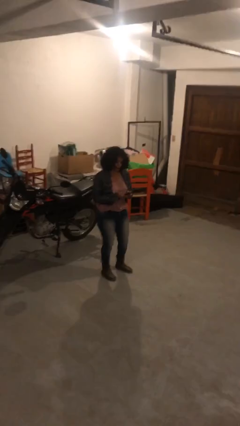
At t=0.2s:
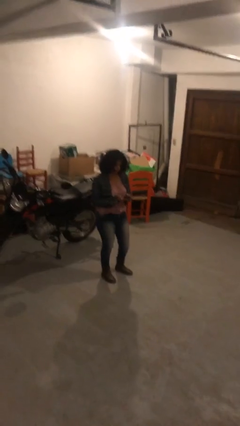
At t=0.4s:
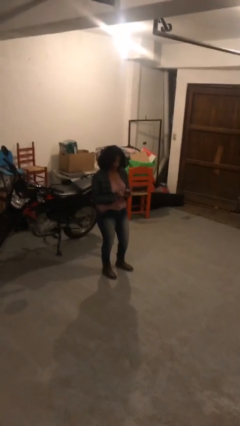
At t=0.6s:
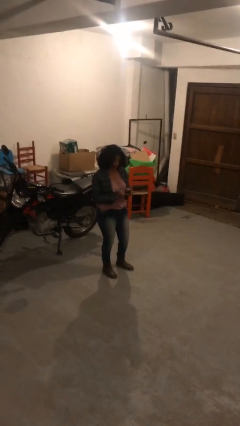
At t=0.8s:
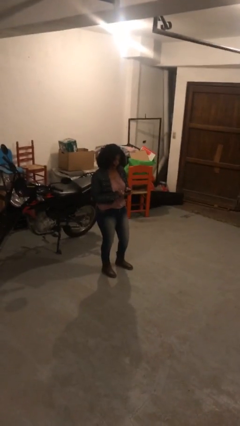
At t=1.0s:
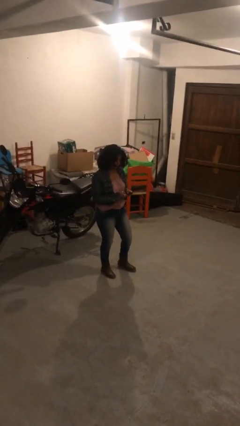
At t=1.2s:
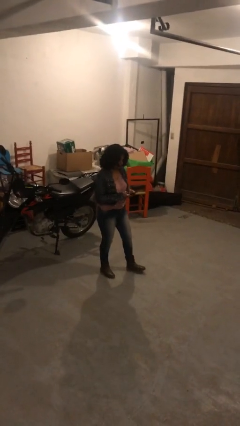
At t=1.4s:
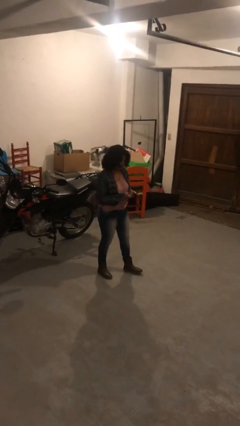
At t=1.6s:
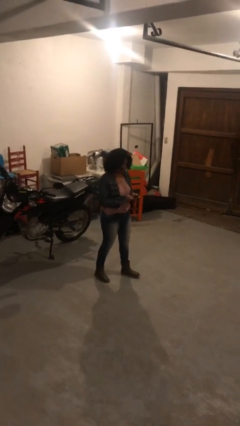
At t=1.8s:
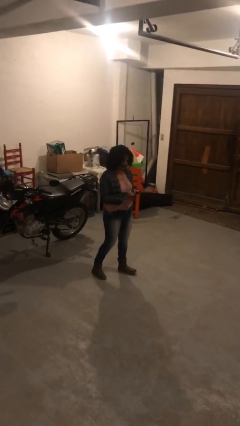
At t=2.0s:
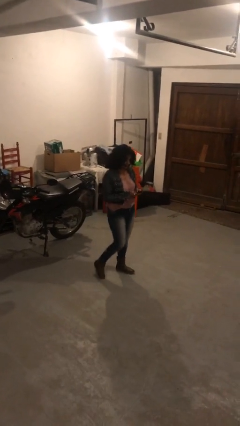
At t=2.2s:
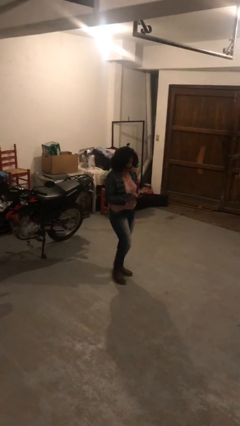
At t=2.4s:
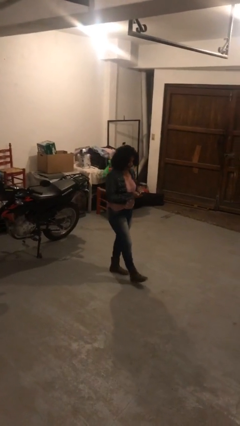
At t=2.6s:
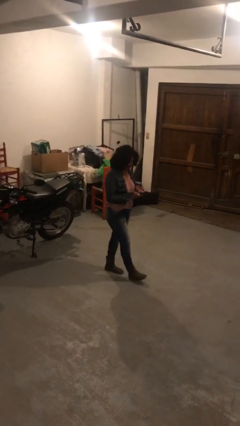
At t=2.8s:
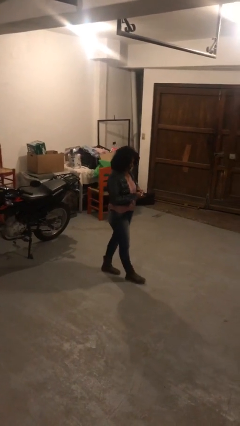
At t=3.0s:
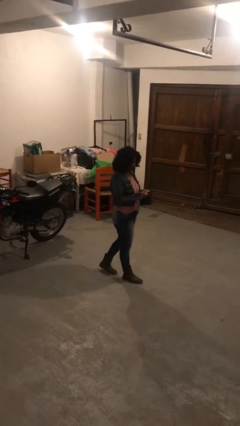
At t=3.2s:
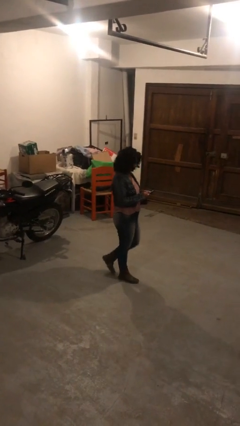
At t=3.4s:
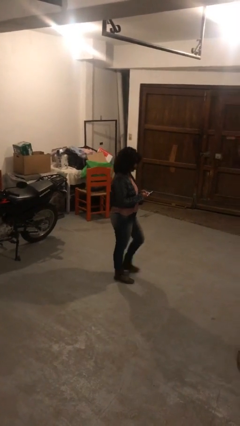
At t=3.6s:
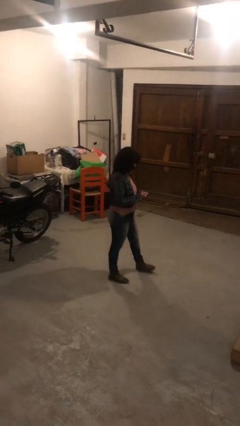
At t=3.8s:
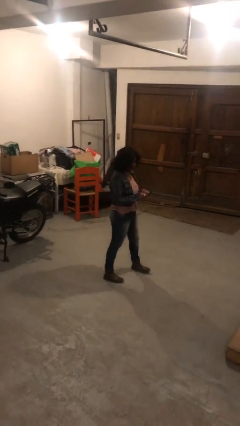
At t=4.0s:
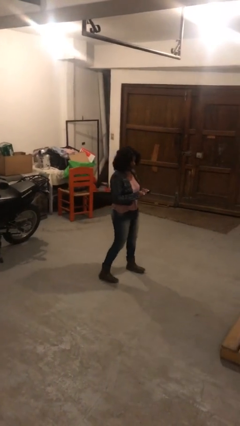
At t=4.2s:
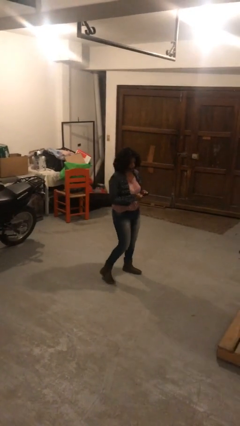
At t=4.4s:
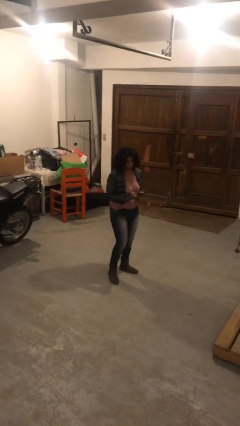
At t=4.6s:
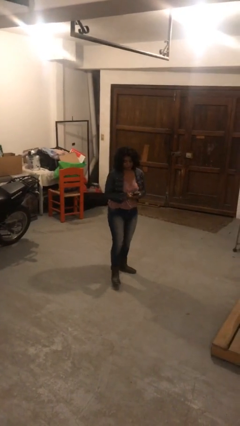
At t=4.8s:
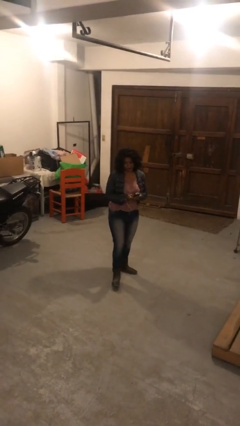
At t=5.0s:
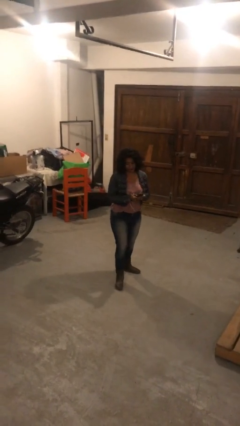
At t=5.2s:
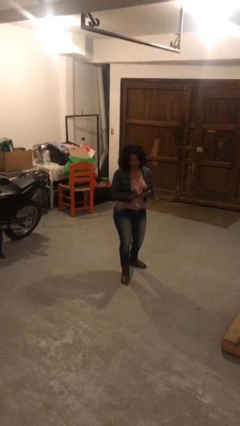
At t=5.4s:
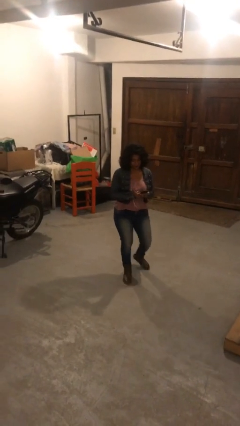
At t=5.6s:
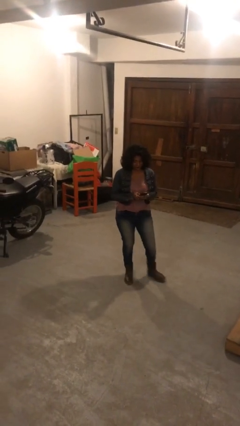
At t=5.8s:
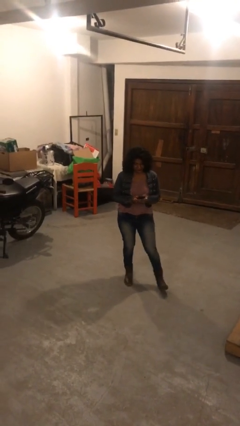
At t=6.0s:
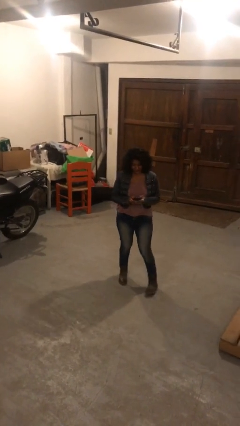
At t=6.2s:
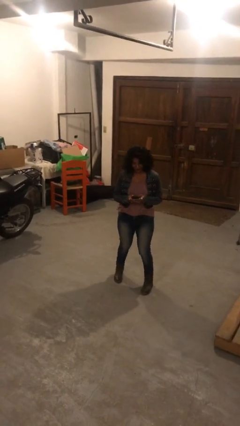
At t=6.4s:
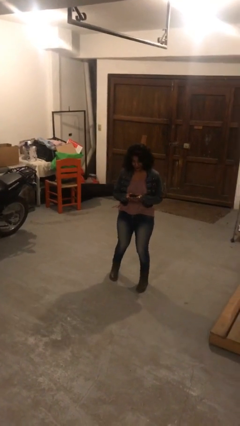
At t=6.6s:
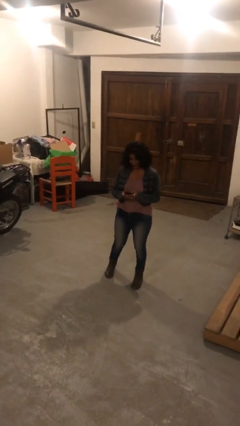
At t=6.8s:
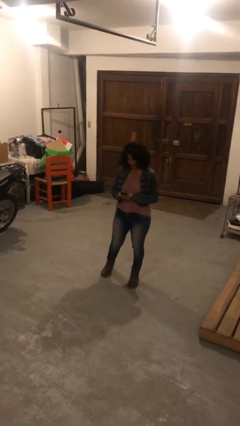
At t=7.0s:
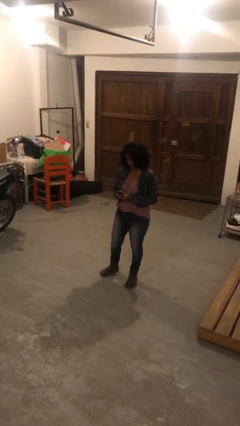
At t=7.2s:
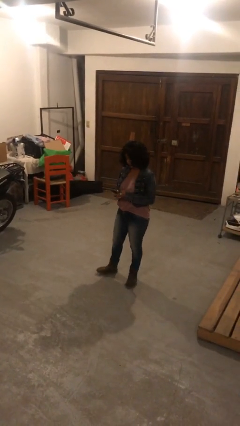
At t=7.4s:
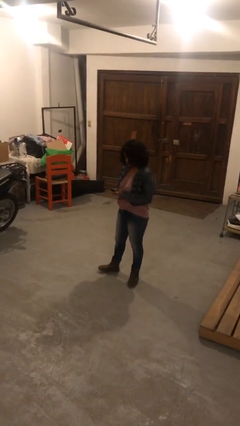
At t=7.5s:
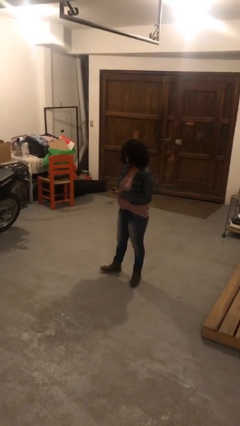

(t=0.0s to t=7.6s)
person texts on phone

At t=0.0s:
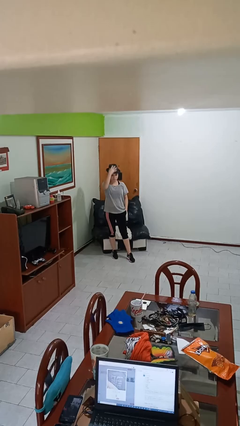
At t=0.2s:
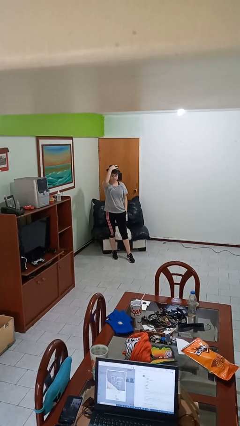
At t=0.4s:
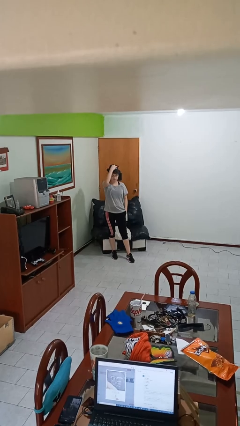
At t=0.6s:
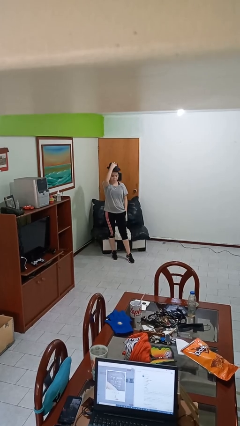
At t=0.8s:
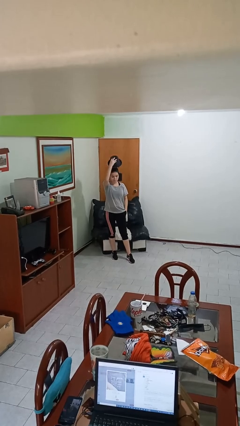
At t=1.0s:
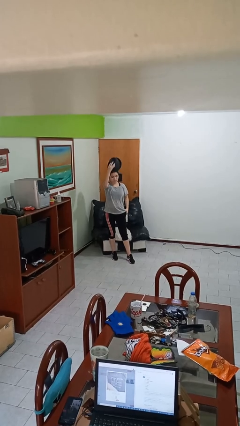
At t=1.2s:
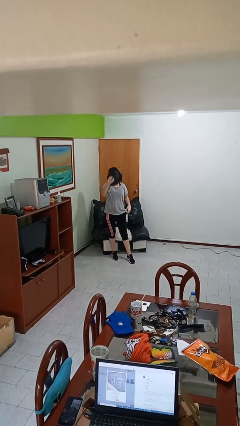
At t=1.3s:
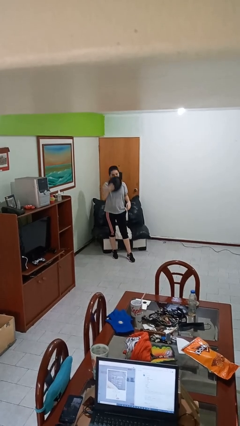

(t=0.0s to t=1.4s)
person takes off hat

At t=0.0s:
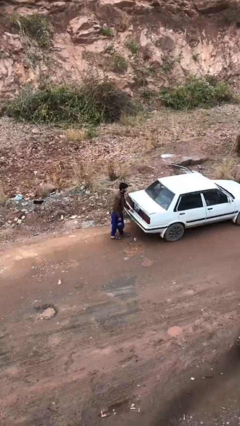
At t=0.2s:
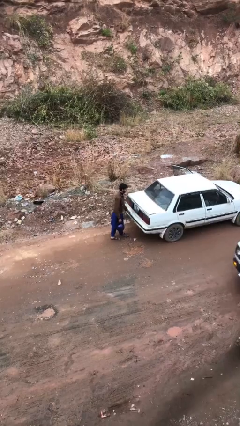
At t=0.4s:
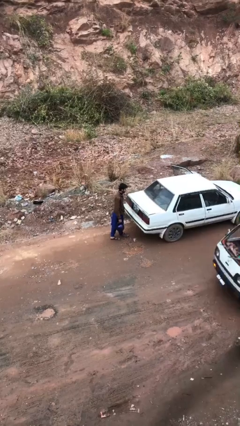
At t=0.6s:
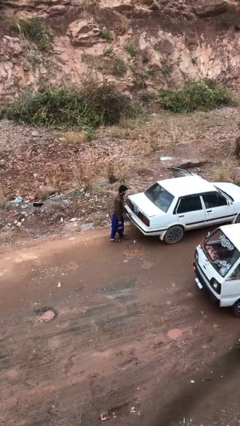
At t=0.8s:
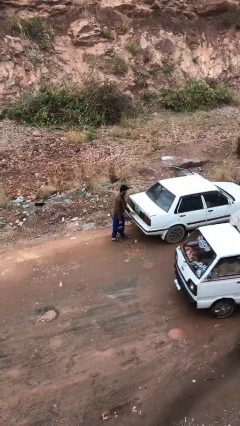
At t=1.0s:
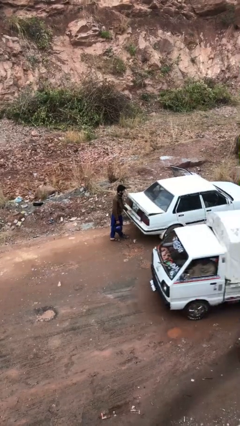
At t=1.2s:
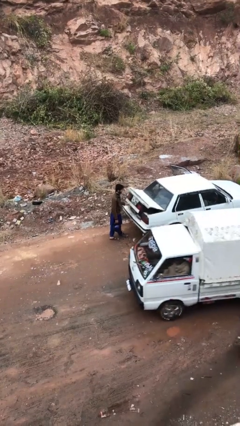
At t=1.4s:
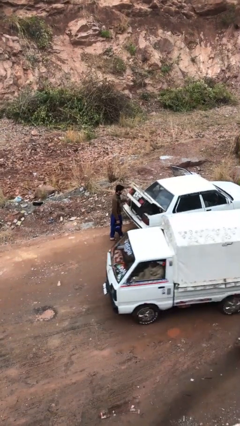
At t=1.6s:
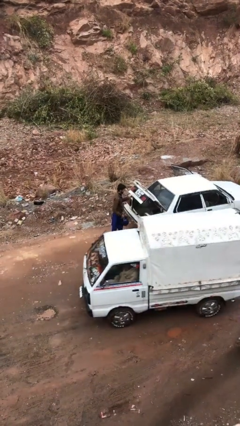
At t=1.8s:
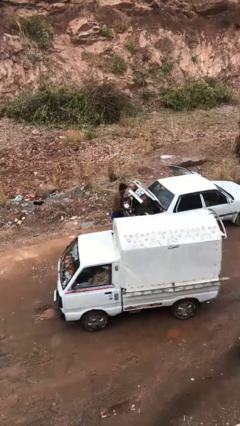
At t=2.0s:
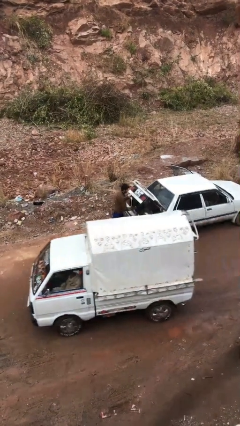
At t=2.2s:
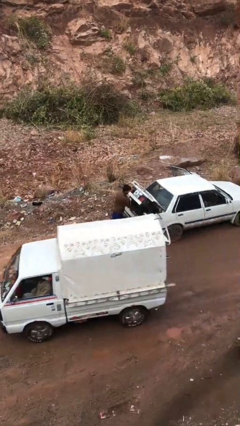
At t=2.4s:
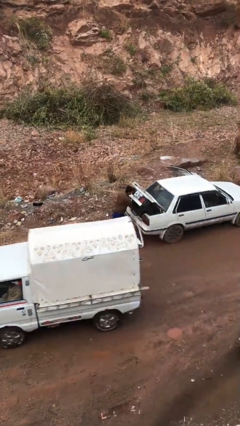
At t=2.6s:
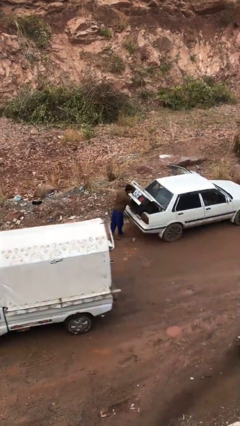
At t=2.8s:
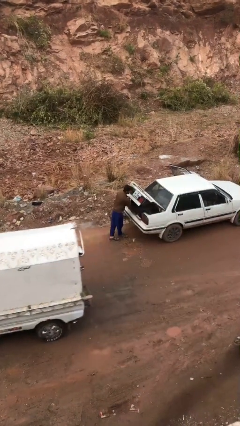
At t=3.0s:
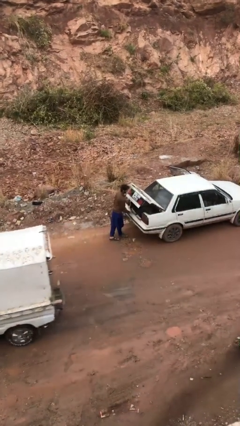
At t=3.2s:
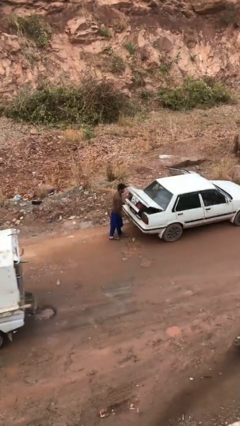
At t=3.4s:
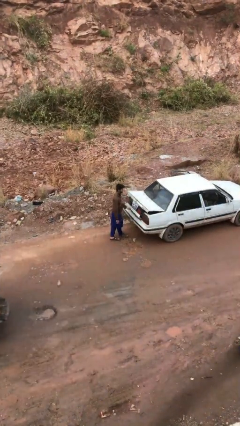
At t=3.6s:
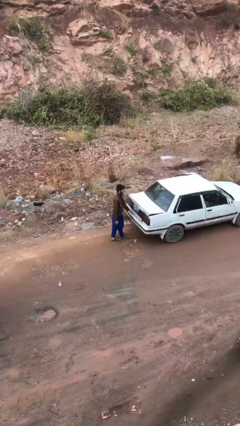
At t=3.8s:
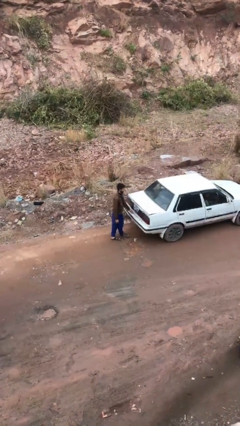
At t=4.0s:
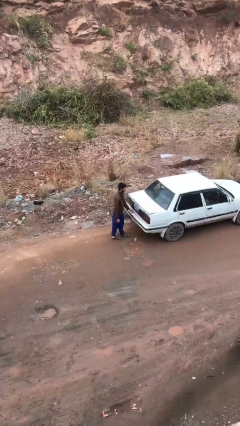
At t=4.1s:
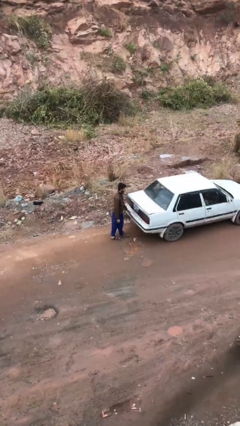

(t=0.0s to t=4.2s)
person loads car

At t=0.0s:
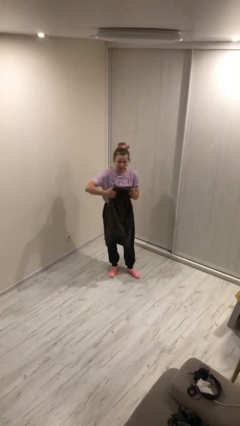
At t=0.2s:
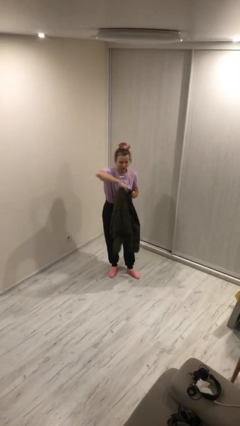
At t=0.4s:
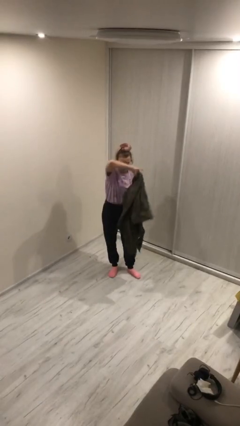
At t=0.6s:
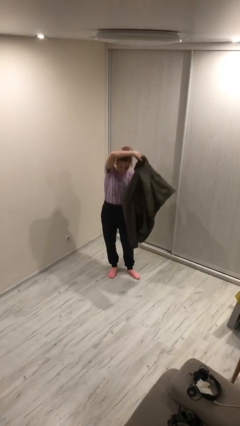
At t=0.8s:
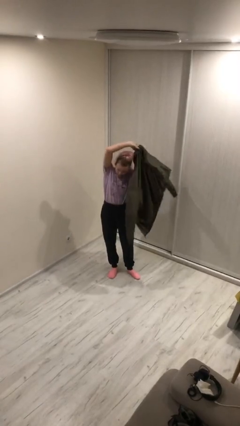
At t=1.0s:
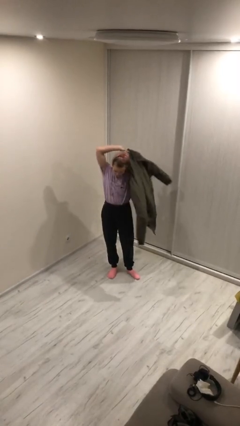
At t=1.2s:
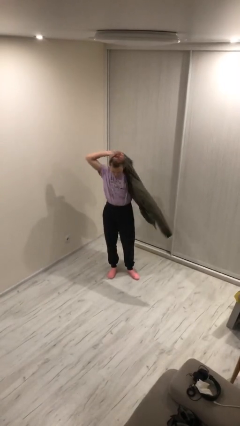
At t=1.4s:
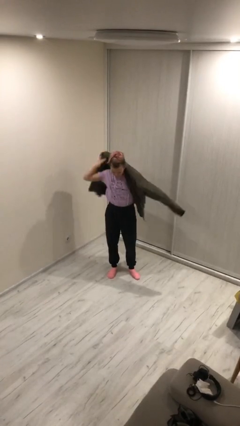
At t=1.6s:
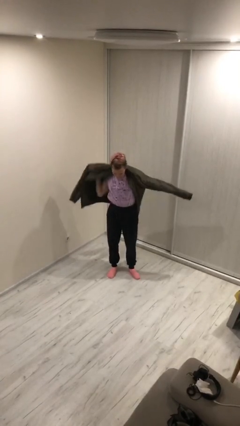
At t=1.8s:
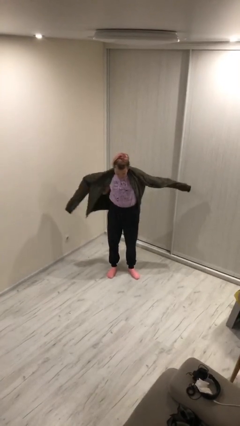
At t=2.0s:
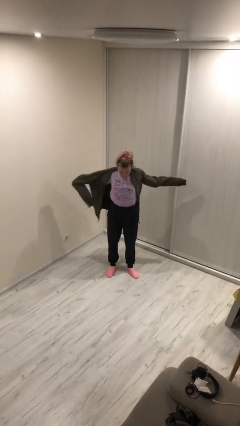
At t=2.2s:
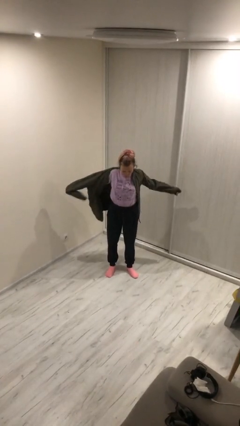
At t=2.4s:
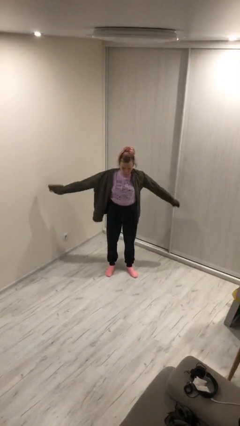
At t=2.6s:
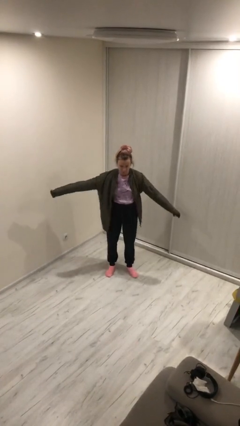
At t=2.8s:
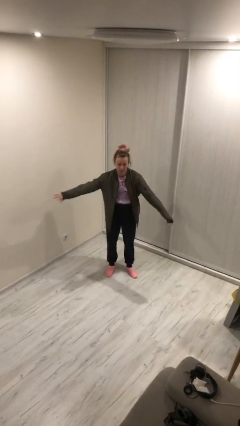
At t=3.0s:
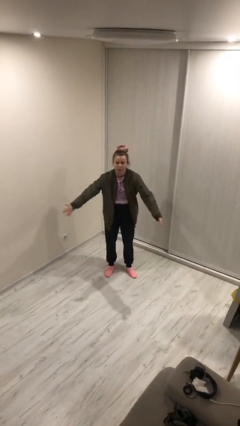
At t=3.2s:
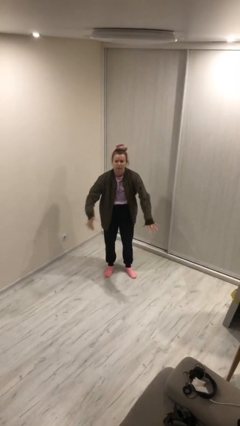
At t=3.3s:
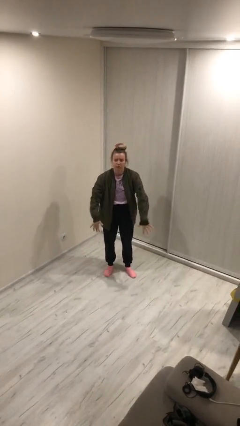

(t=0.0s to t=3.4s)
person puts on jacket

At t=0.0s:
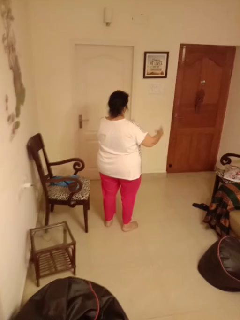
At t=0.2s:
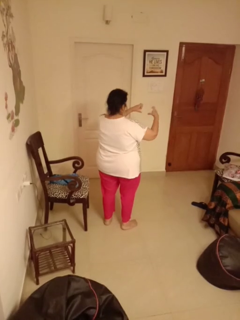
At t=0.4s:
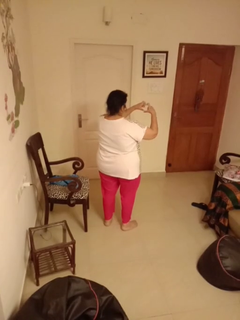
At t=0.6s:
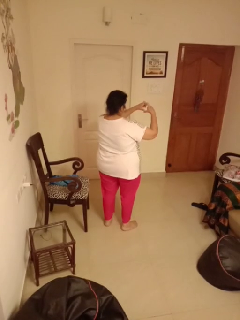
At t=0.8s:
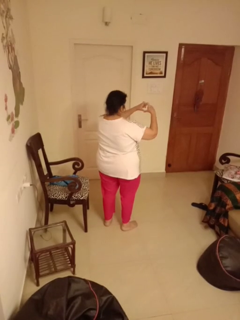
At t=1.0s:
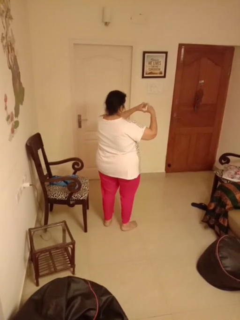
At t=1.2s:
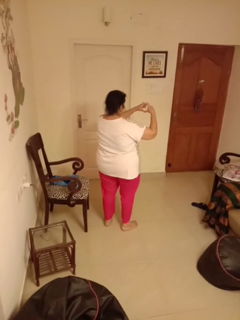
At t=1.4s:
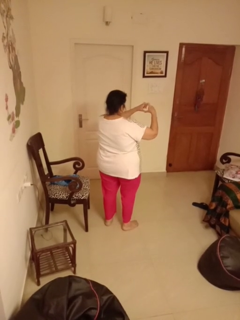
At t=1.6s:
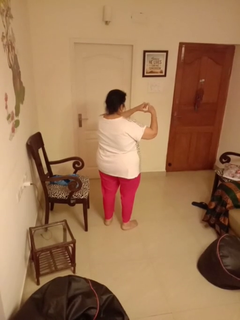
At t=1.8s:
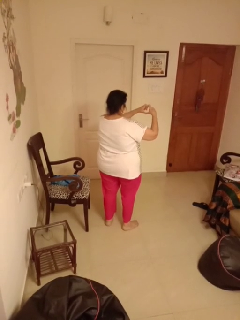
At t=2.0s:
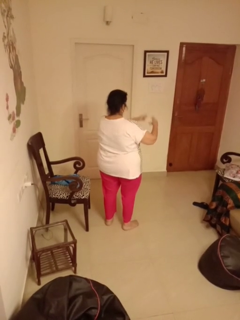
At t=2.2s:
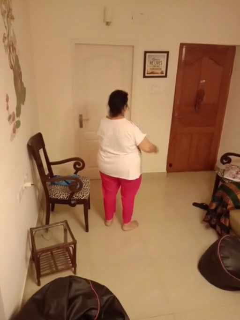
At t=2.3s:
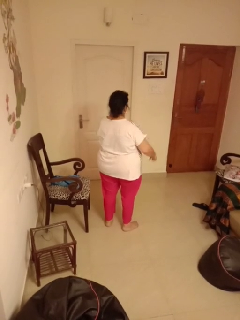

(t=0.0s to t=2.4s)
person gestures heart
